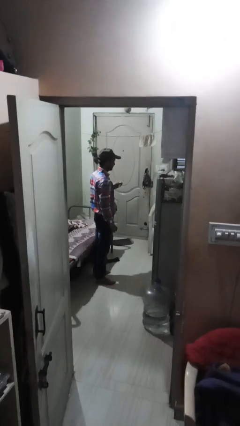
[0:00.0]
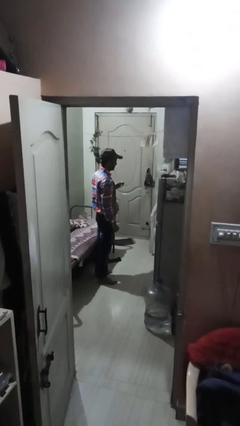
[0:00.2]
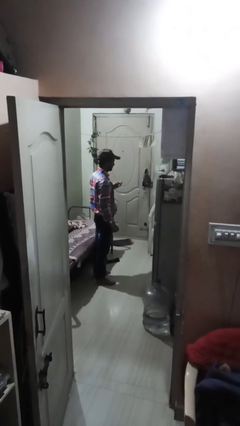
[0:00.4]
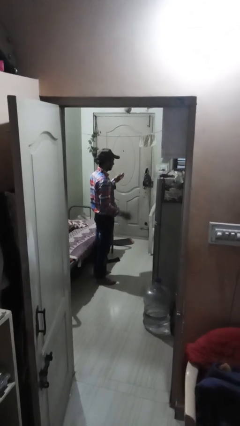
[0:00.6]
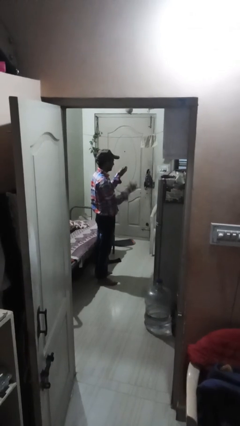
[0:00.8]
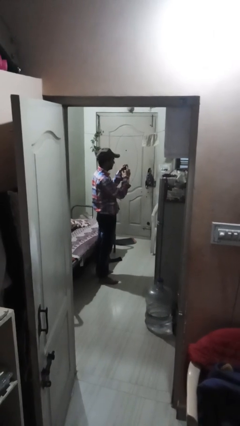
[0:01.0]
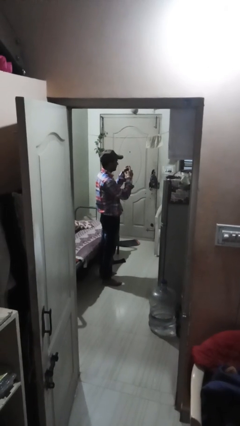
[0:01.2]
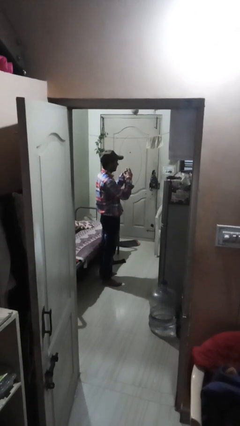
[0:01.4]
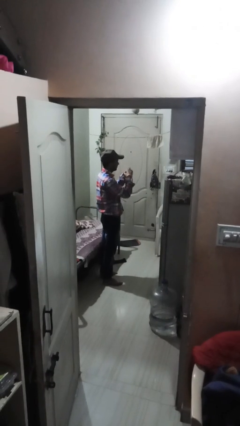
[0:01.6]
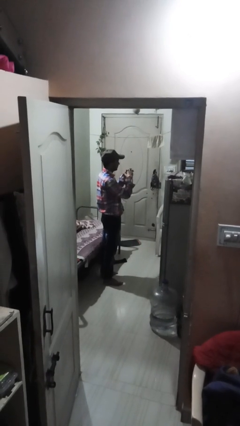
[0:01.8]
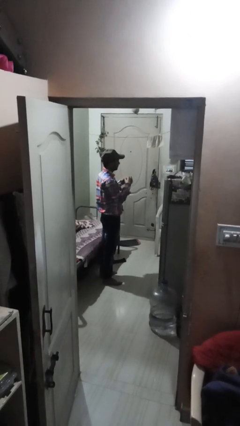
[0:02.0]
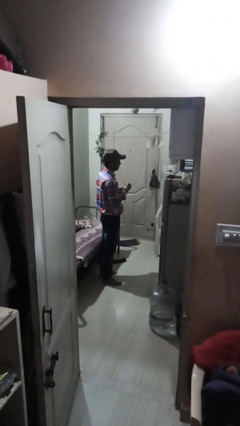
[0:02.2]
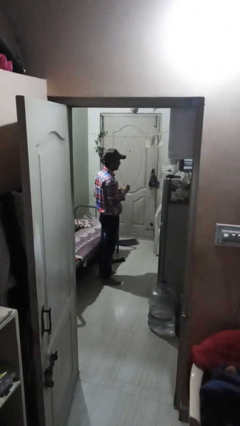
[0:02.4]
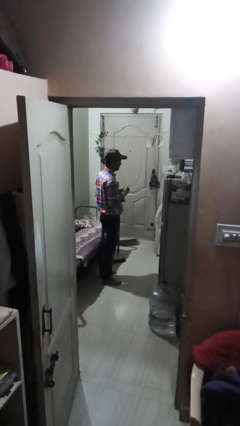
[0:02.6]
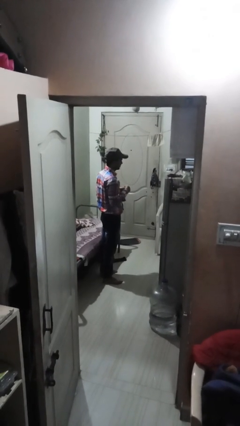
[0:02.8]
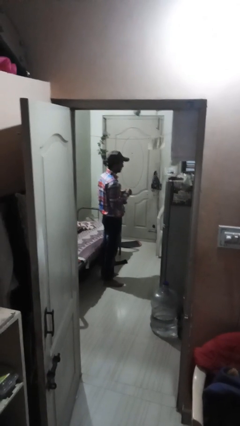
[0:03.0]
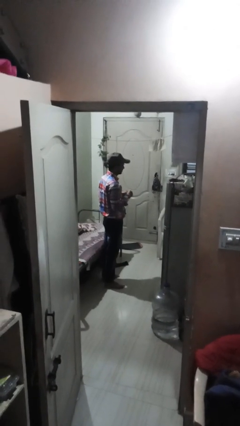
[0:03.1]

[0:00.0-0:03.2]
person puts on ring

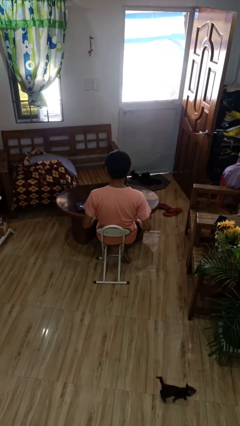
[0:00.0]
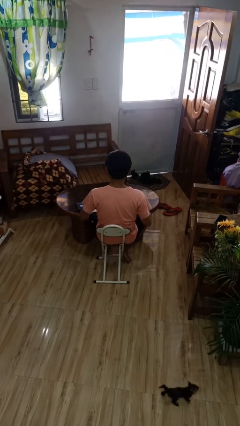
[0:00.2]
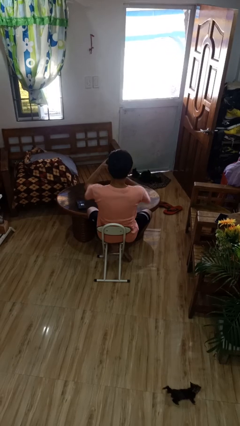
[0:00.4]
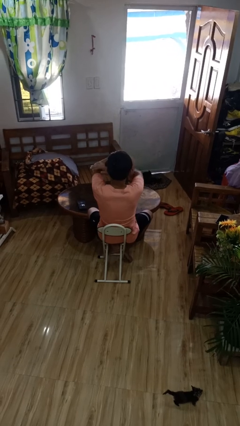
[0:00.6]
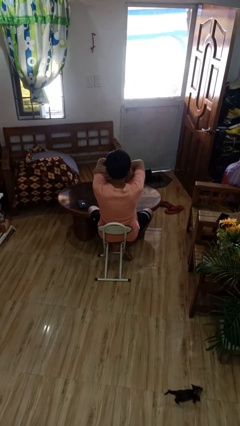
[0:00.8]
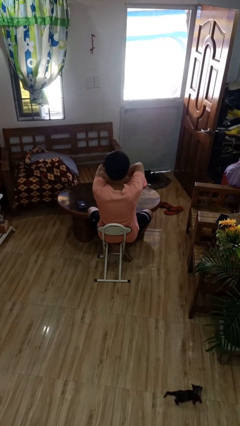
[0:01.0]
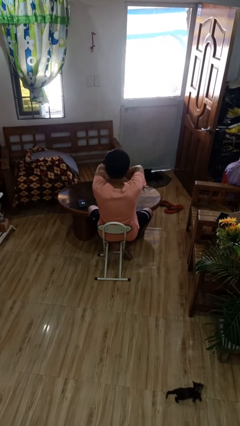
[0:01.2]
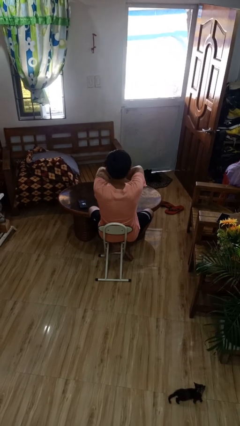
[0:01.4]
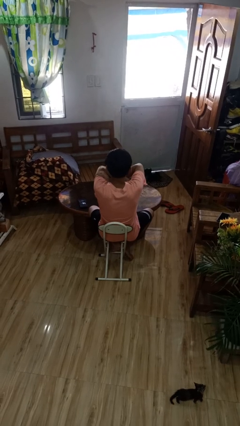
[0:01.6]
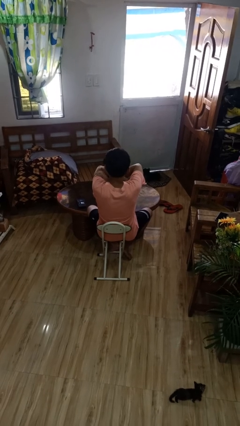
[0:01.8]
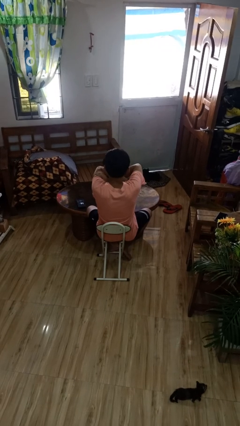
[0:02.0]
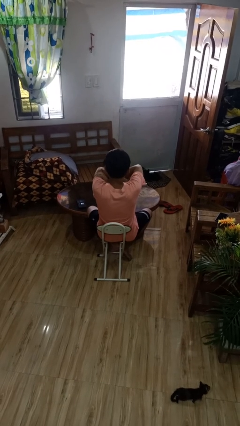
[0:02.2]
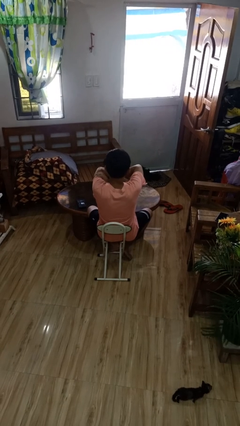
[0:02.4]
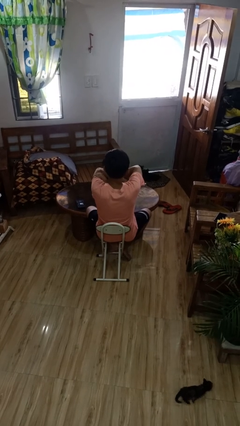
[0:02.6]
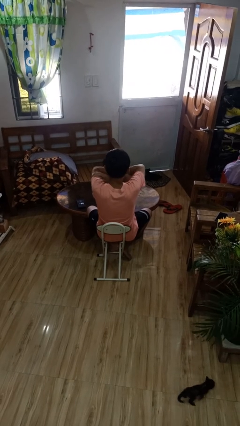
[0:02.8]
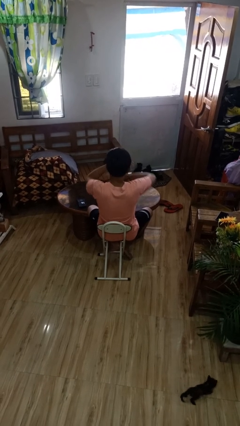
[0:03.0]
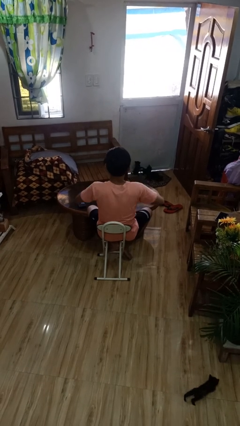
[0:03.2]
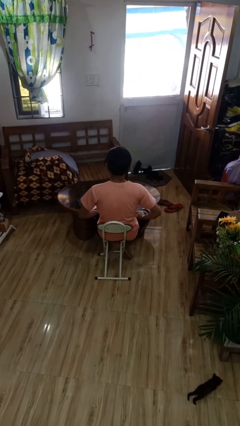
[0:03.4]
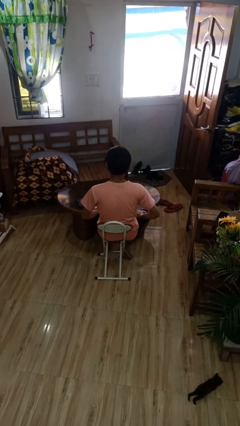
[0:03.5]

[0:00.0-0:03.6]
person crosses arms

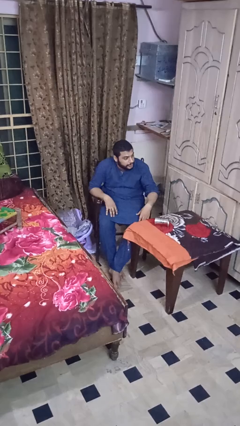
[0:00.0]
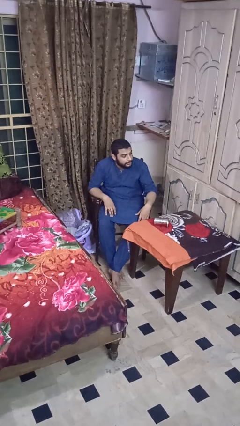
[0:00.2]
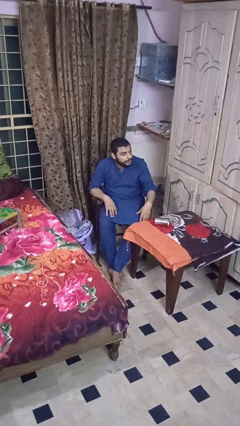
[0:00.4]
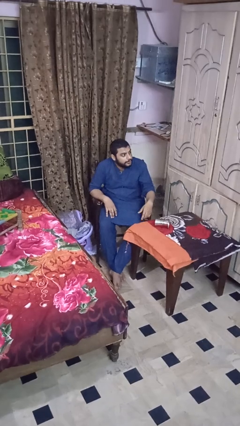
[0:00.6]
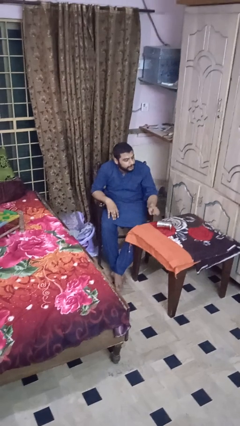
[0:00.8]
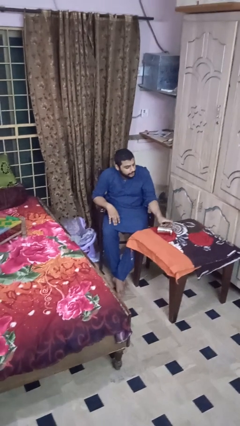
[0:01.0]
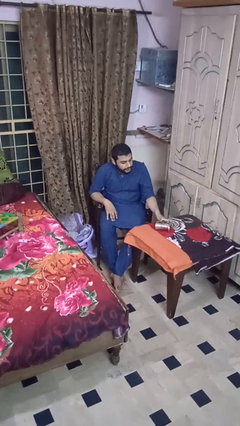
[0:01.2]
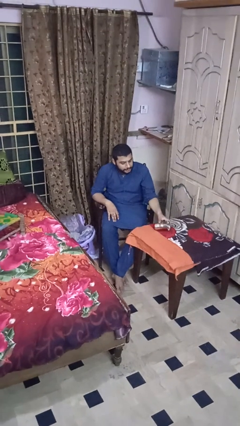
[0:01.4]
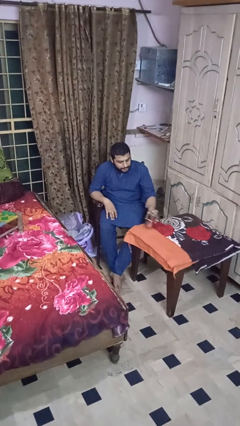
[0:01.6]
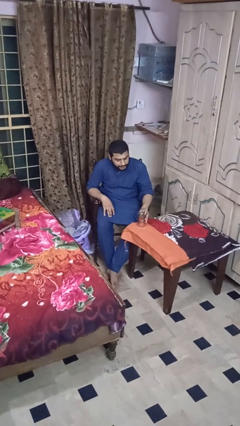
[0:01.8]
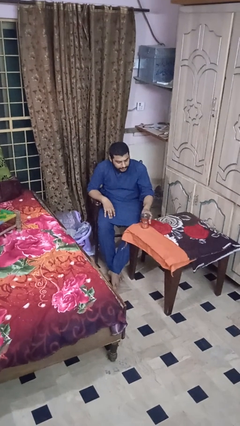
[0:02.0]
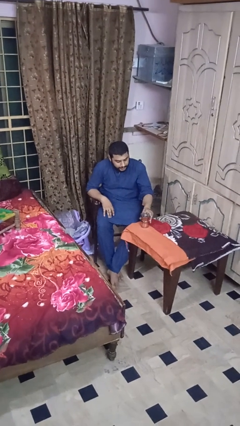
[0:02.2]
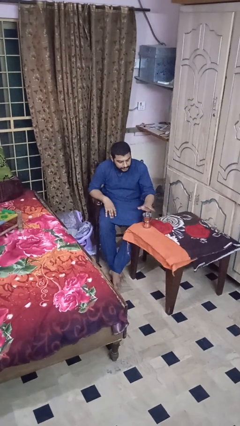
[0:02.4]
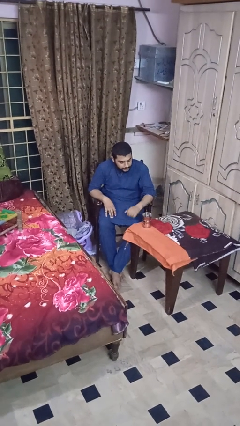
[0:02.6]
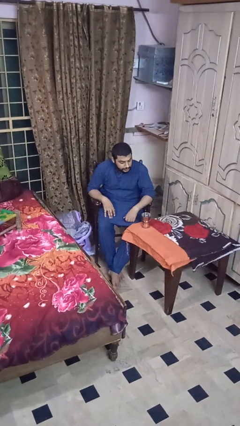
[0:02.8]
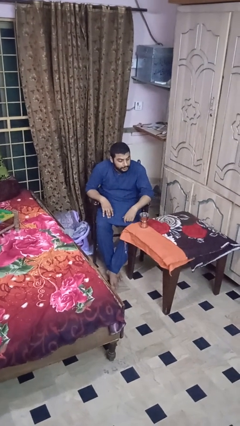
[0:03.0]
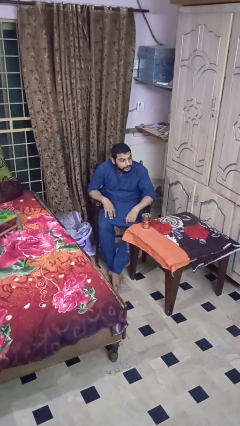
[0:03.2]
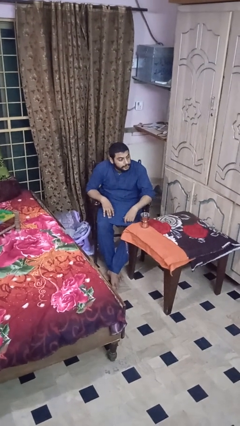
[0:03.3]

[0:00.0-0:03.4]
person sets upright glass

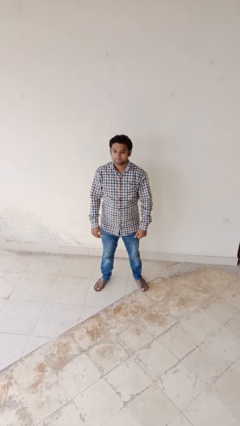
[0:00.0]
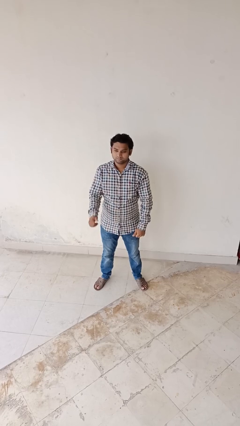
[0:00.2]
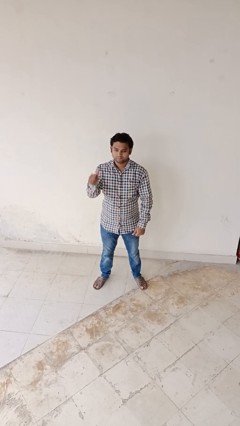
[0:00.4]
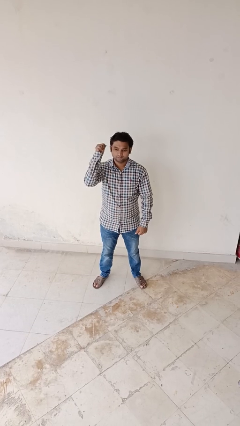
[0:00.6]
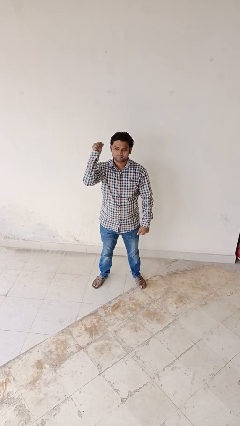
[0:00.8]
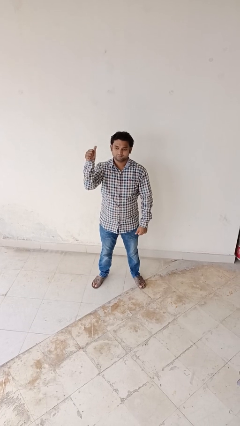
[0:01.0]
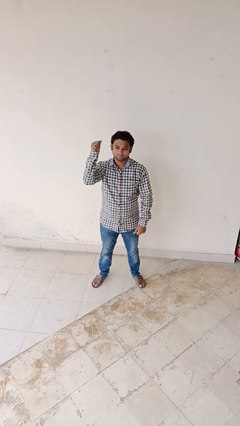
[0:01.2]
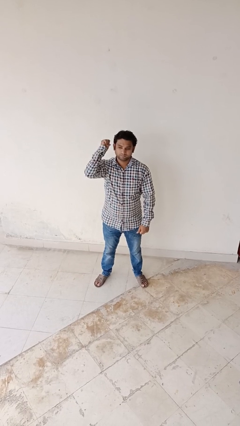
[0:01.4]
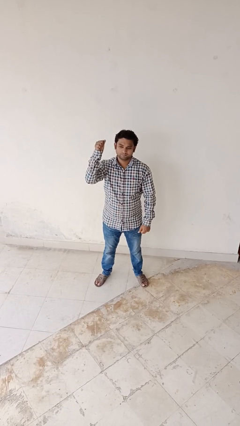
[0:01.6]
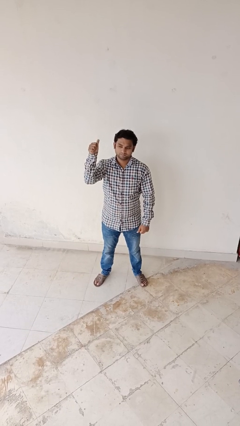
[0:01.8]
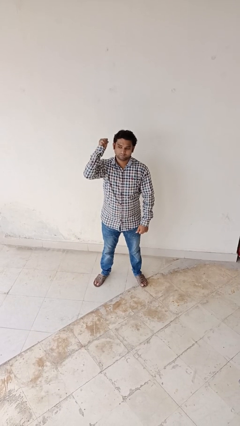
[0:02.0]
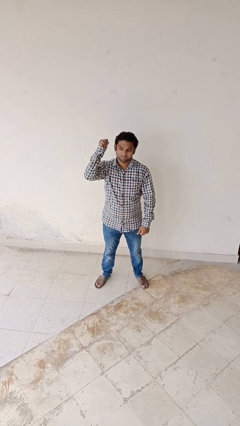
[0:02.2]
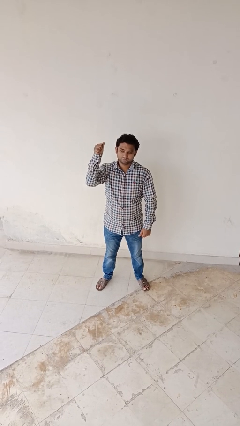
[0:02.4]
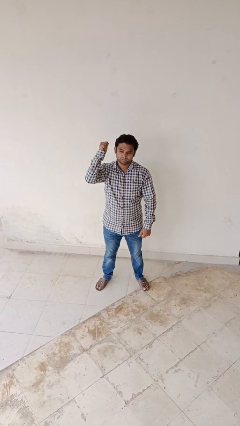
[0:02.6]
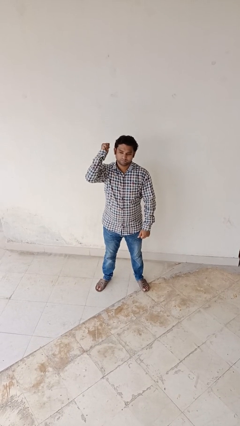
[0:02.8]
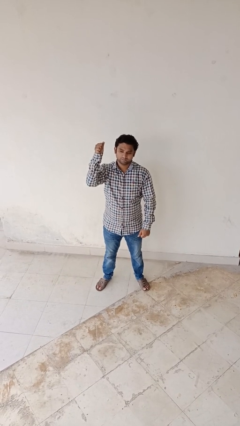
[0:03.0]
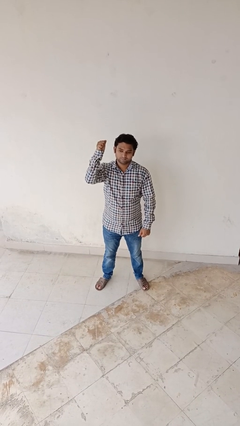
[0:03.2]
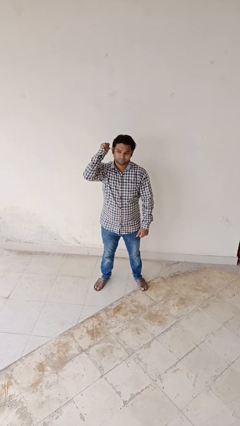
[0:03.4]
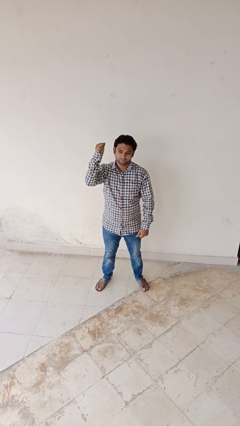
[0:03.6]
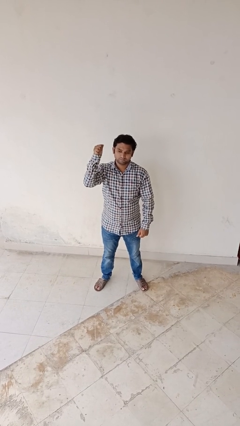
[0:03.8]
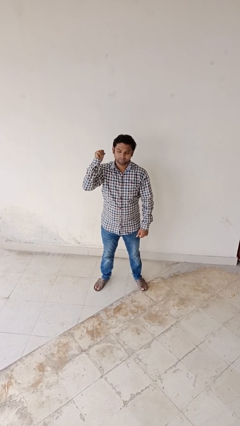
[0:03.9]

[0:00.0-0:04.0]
person gestures behind me

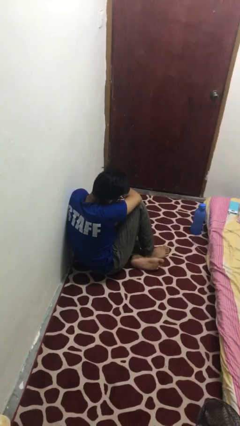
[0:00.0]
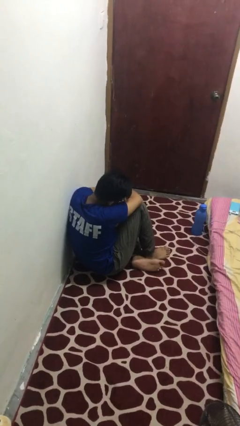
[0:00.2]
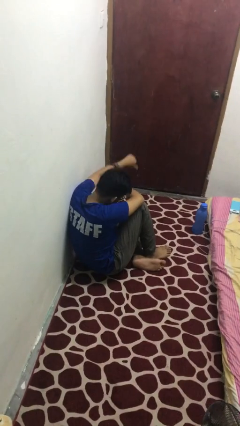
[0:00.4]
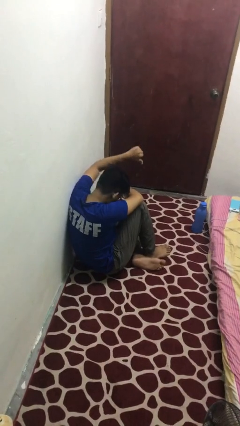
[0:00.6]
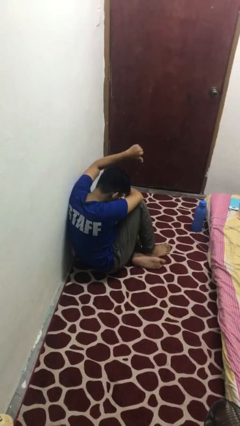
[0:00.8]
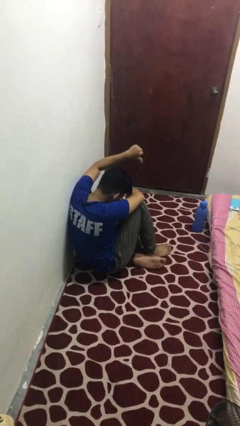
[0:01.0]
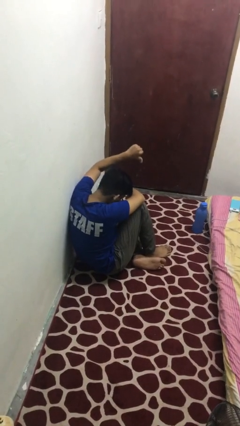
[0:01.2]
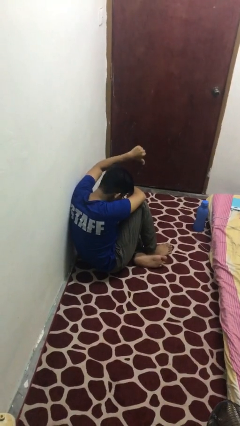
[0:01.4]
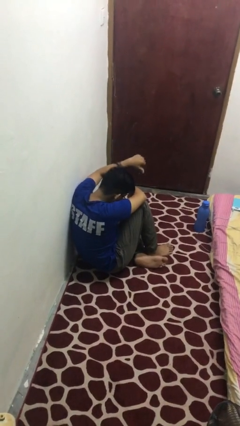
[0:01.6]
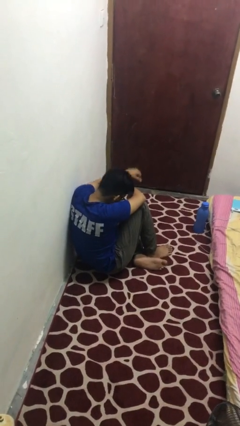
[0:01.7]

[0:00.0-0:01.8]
person gestures thumbs down

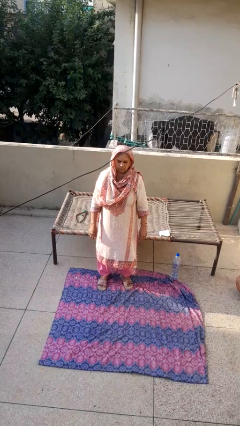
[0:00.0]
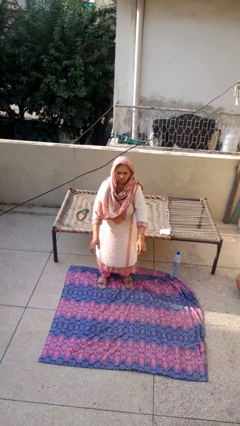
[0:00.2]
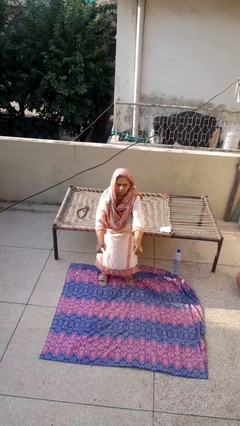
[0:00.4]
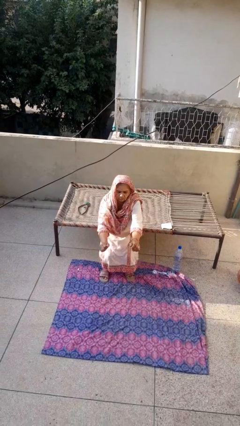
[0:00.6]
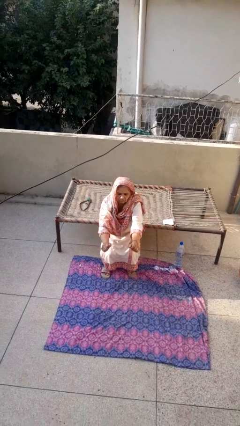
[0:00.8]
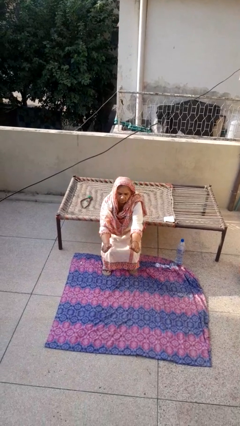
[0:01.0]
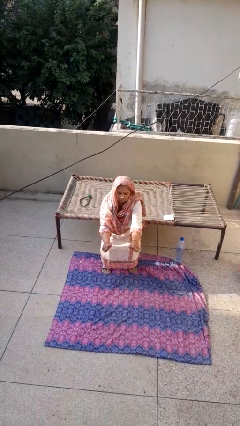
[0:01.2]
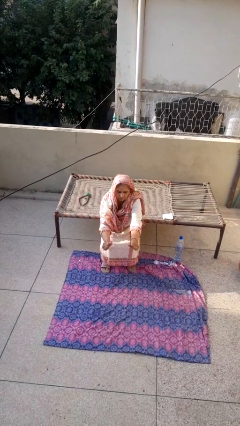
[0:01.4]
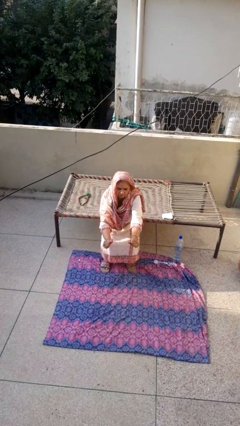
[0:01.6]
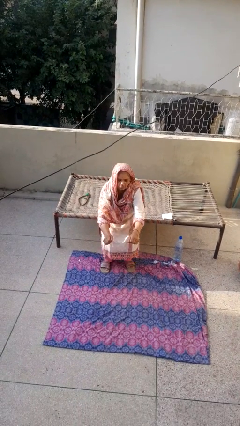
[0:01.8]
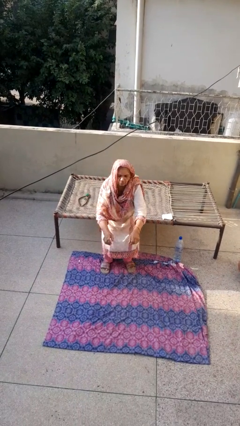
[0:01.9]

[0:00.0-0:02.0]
person squats
